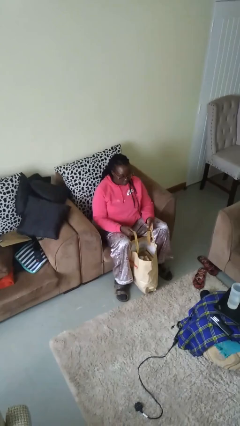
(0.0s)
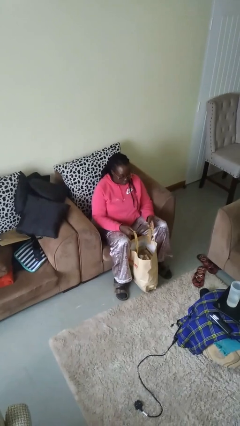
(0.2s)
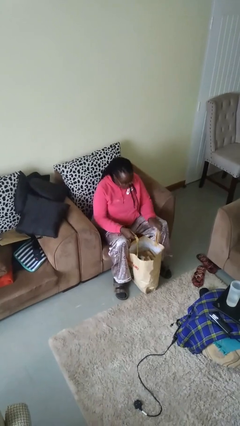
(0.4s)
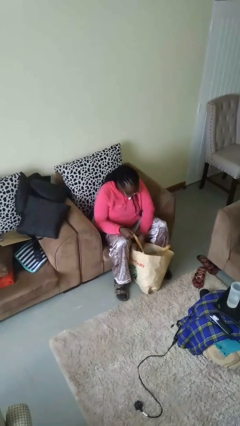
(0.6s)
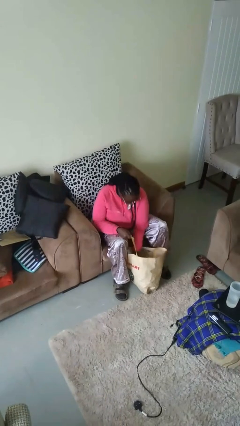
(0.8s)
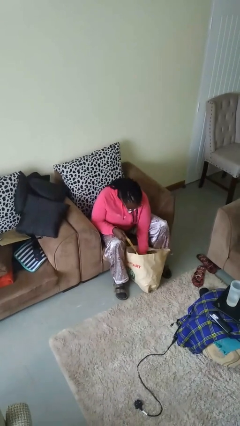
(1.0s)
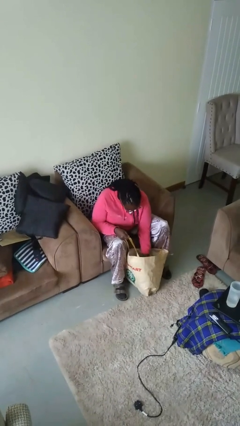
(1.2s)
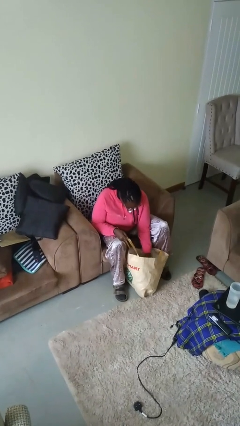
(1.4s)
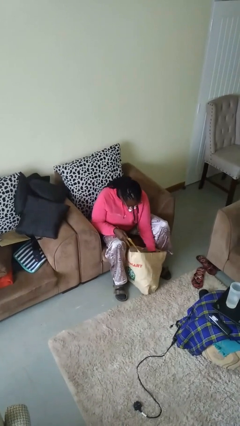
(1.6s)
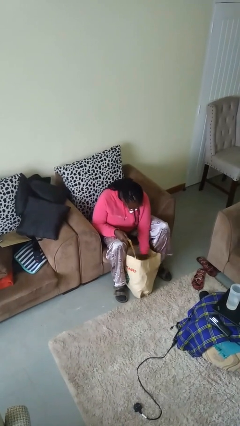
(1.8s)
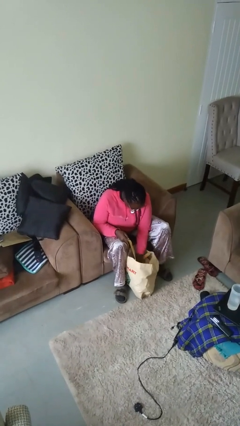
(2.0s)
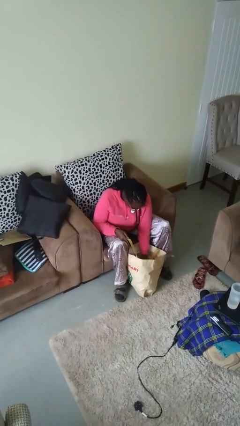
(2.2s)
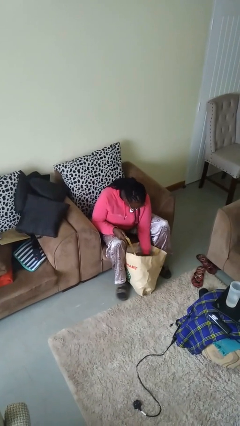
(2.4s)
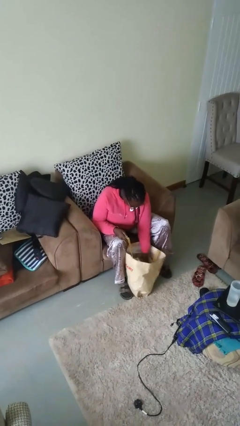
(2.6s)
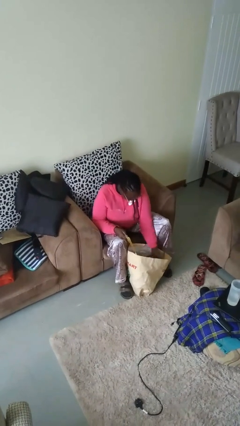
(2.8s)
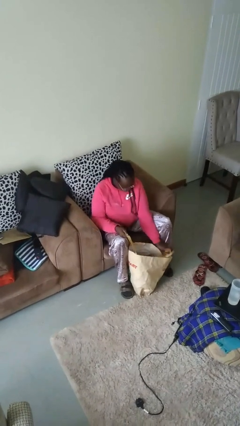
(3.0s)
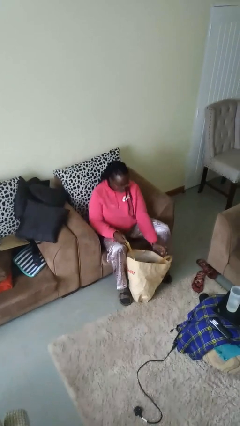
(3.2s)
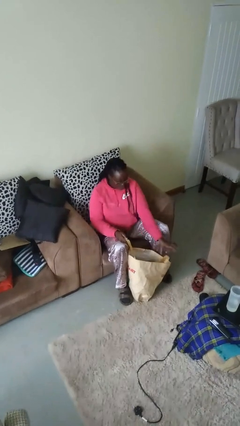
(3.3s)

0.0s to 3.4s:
person searches in bag

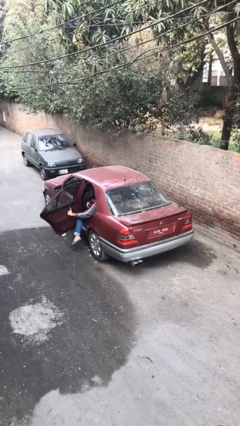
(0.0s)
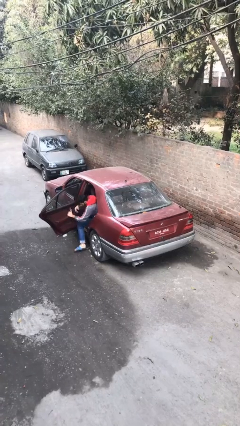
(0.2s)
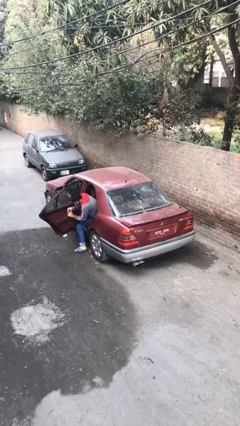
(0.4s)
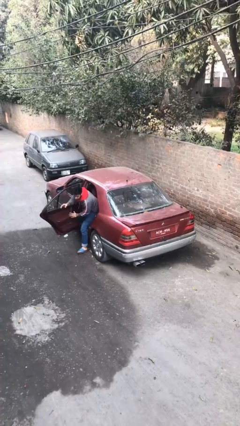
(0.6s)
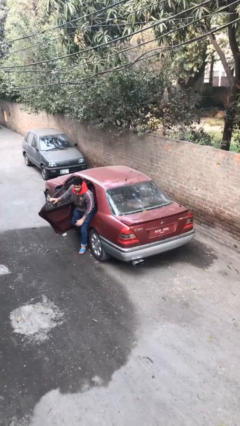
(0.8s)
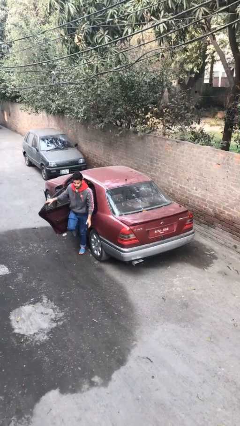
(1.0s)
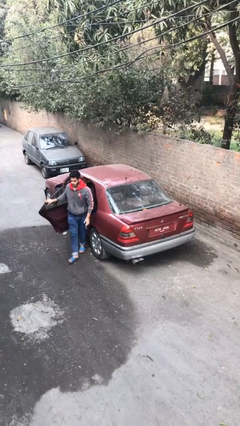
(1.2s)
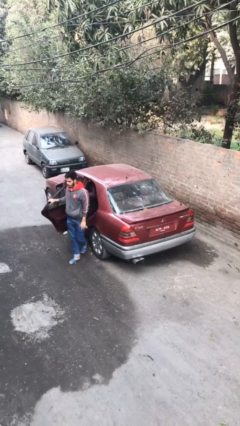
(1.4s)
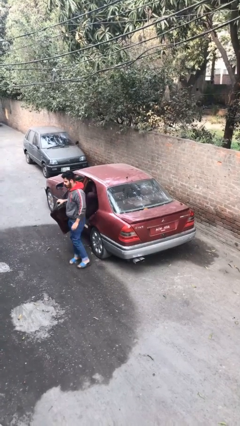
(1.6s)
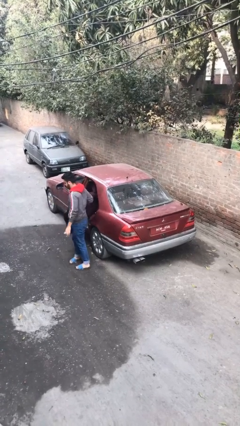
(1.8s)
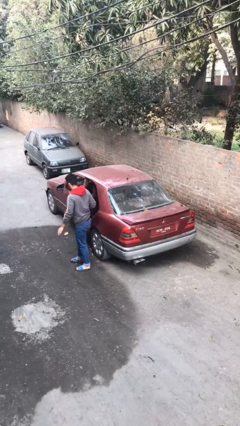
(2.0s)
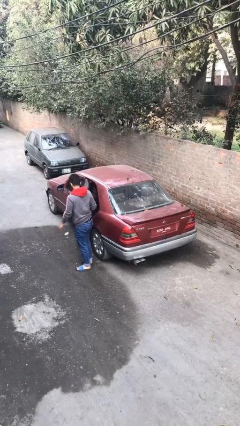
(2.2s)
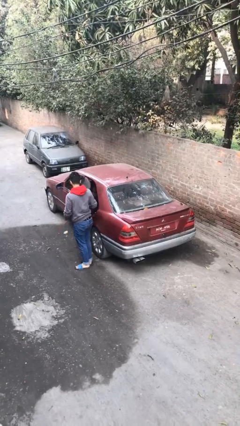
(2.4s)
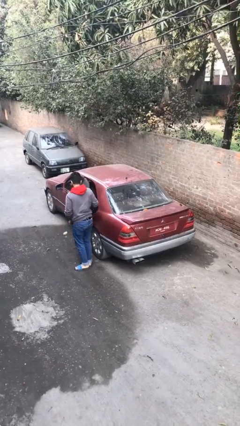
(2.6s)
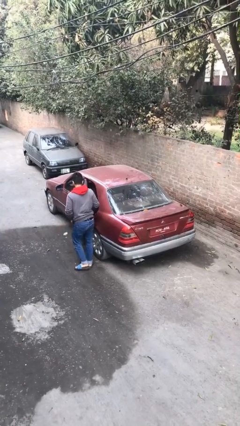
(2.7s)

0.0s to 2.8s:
car drops off person

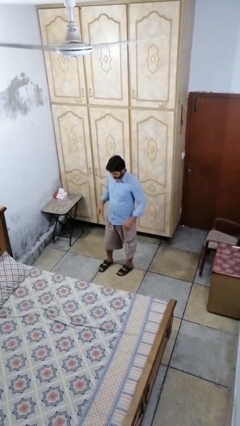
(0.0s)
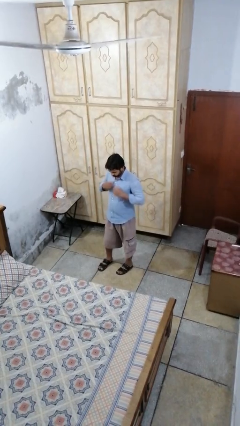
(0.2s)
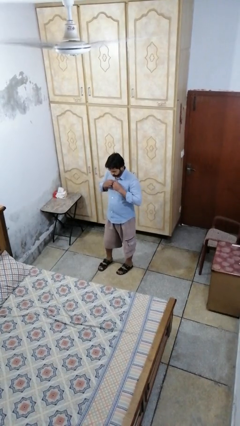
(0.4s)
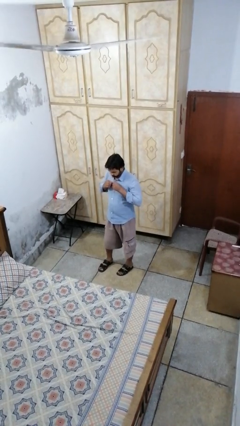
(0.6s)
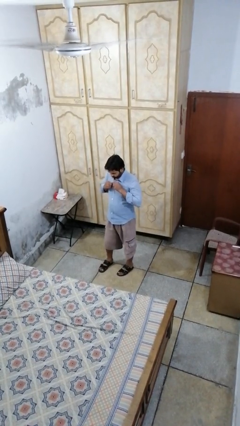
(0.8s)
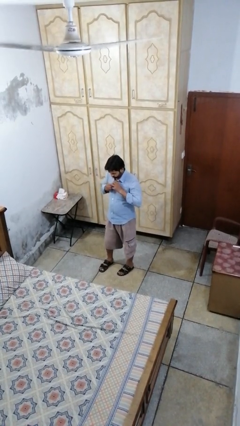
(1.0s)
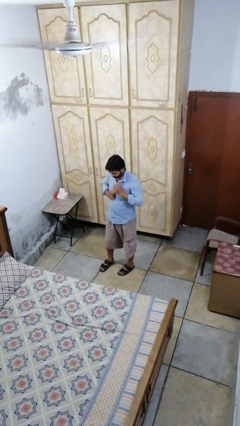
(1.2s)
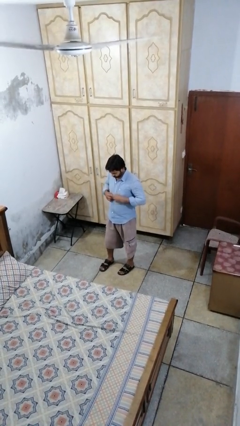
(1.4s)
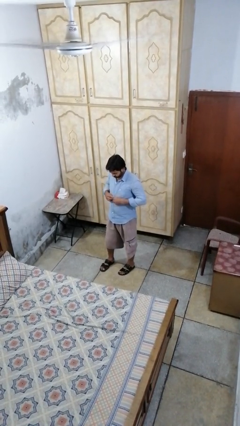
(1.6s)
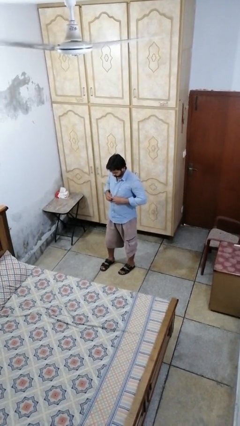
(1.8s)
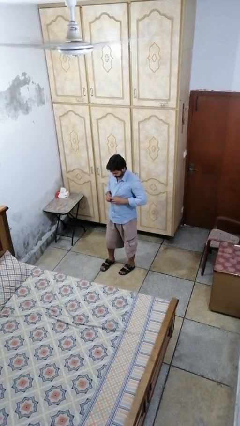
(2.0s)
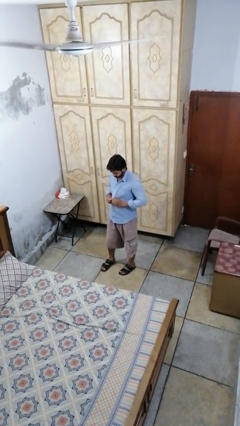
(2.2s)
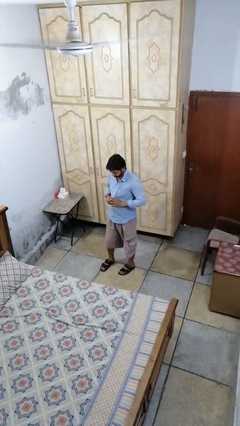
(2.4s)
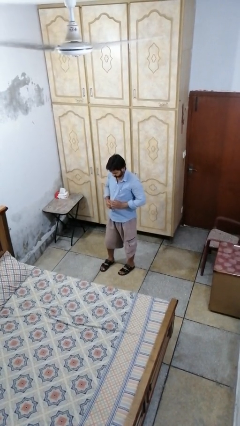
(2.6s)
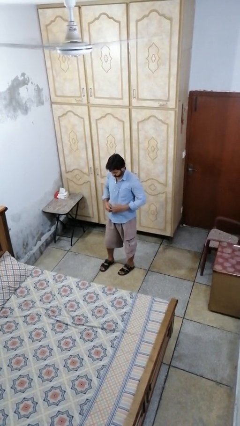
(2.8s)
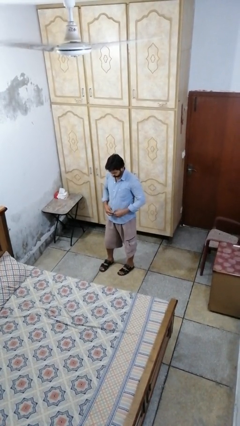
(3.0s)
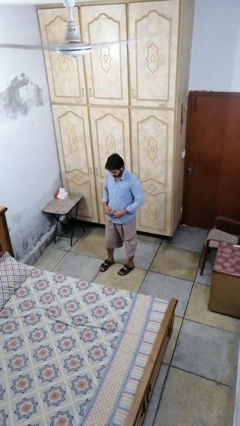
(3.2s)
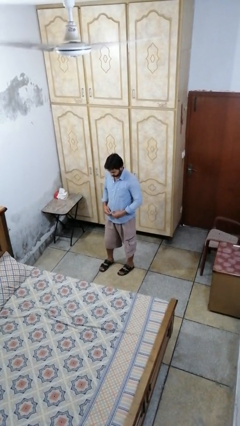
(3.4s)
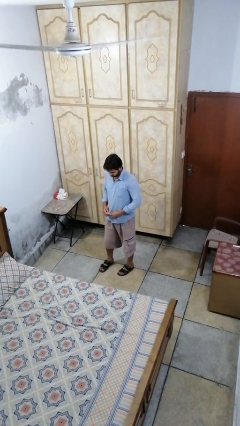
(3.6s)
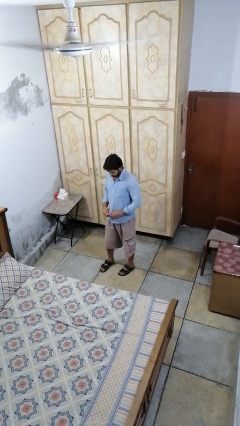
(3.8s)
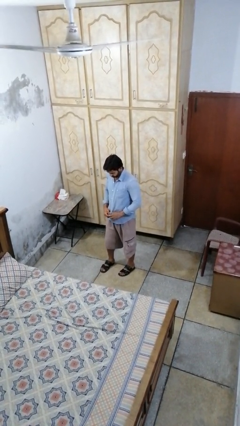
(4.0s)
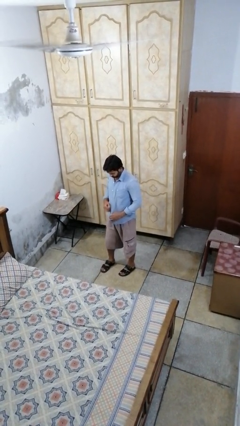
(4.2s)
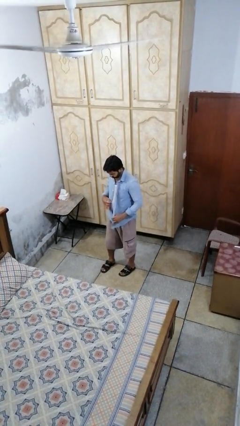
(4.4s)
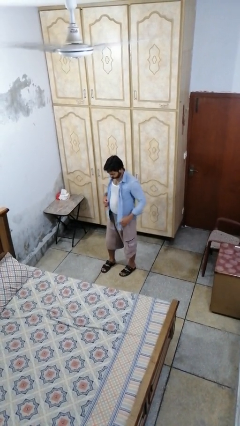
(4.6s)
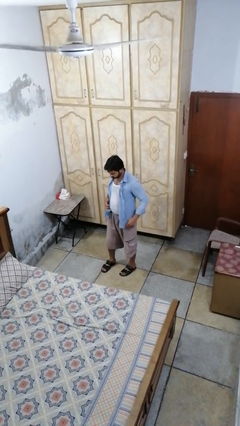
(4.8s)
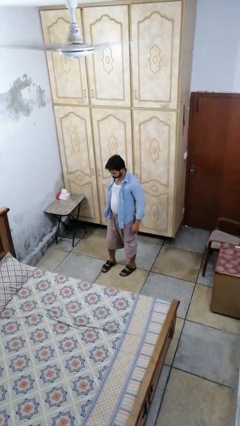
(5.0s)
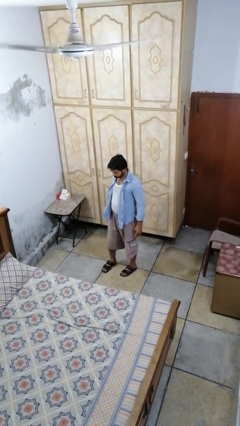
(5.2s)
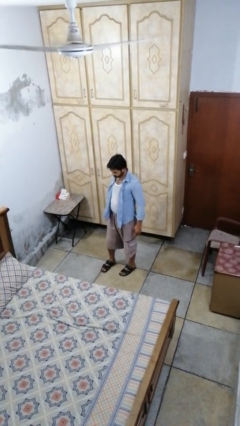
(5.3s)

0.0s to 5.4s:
person unbuttons shirt

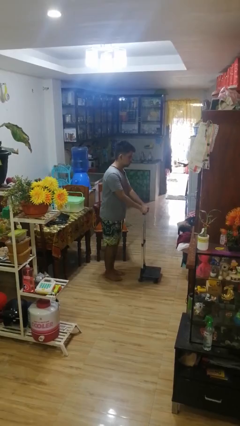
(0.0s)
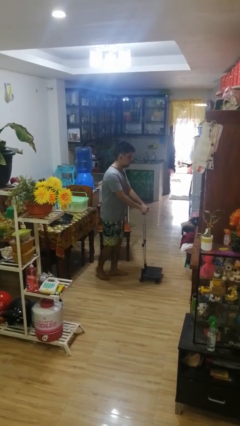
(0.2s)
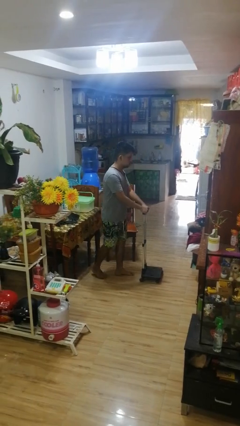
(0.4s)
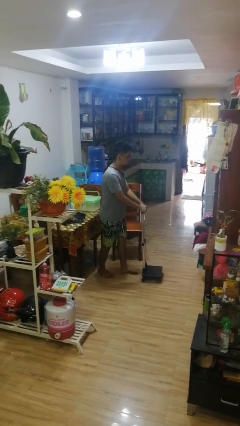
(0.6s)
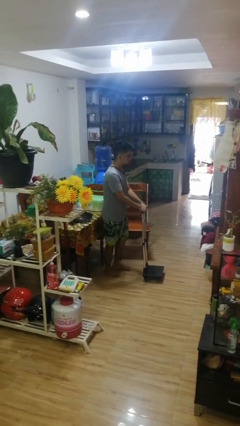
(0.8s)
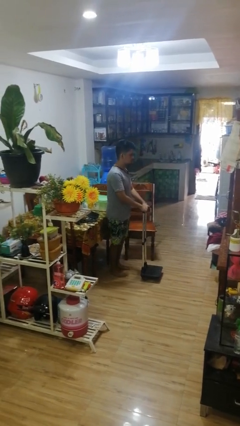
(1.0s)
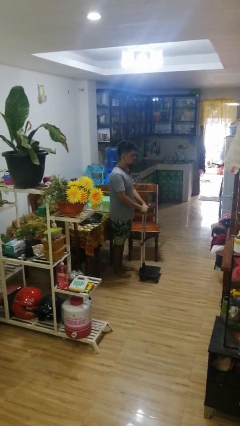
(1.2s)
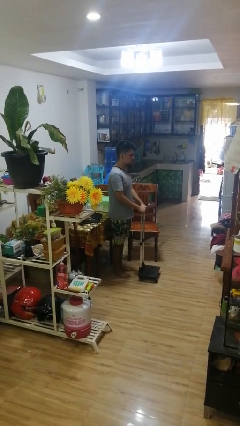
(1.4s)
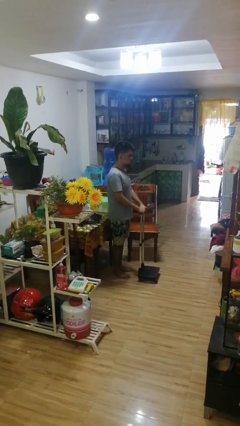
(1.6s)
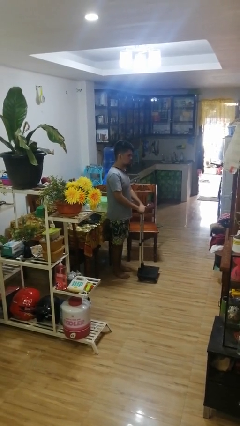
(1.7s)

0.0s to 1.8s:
person pulls wheeled cart

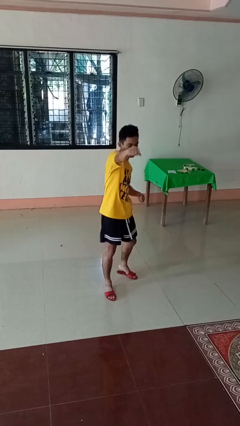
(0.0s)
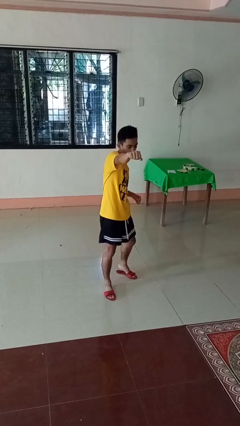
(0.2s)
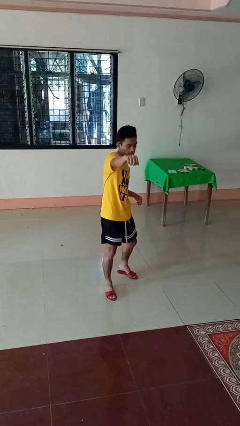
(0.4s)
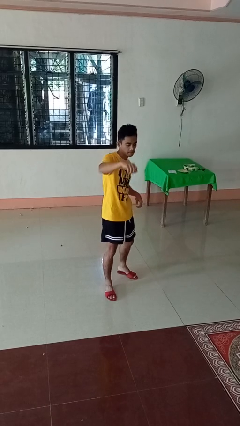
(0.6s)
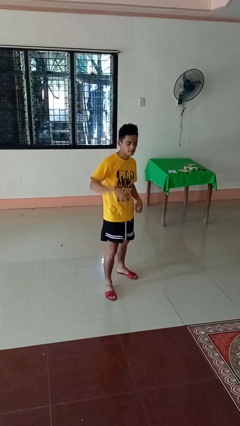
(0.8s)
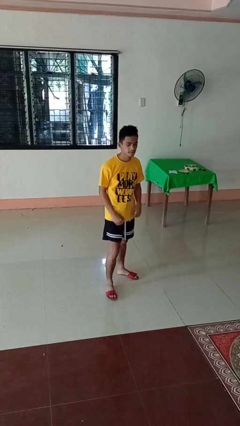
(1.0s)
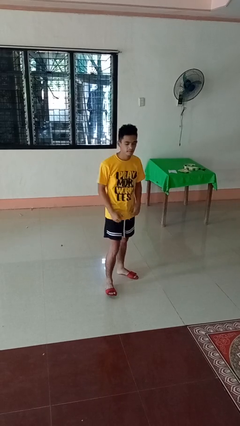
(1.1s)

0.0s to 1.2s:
person punches

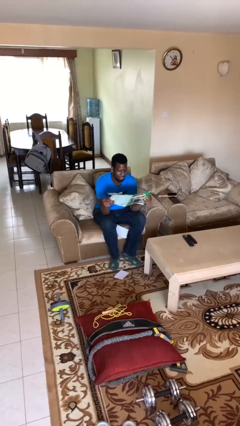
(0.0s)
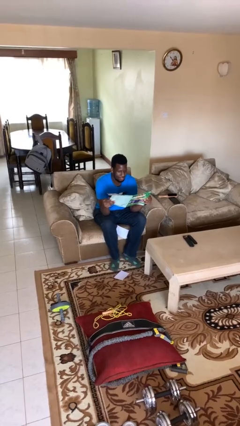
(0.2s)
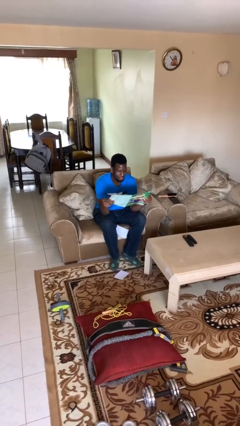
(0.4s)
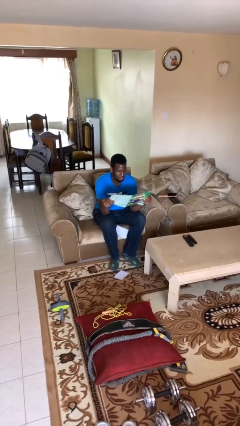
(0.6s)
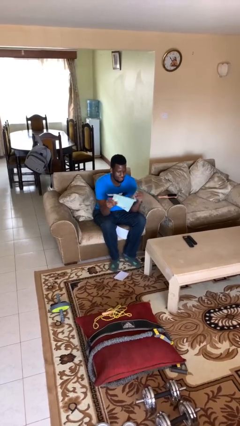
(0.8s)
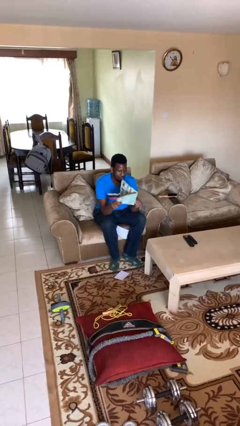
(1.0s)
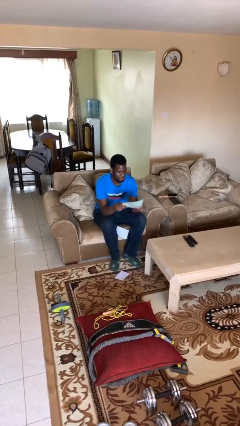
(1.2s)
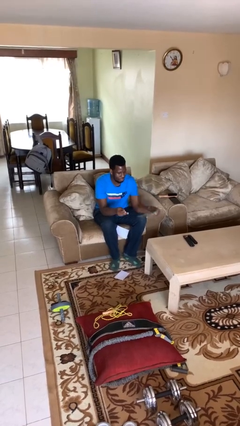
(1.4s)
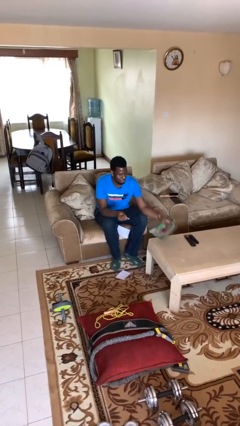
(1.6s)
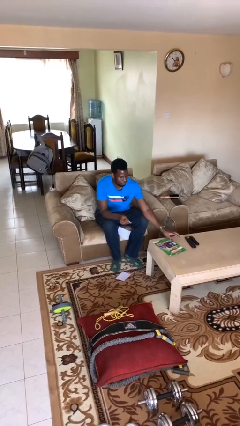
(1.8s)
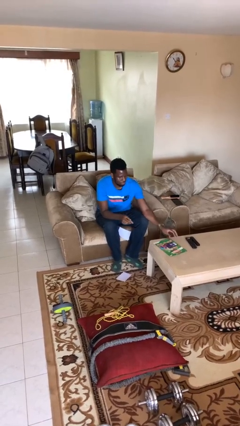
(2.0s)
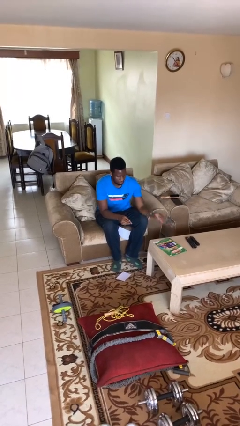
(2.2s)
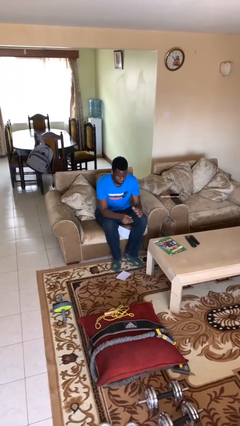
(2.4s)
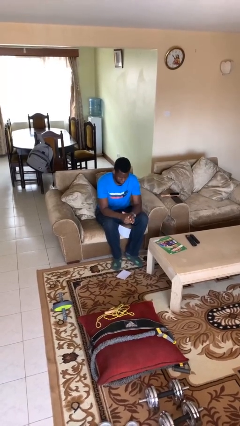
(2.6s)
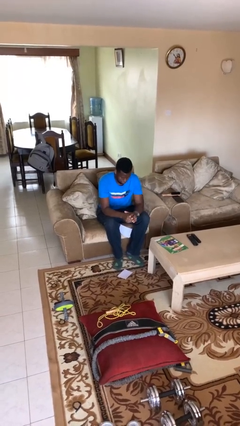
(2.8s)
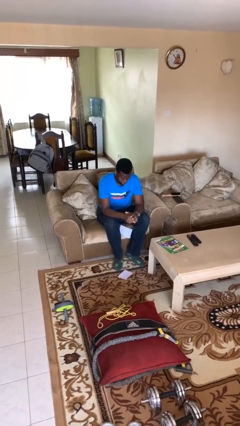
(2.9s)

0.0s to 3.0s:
person puts down object on table
